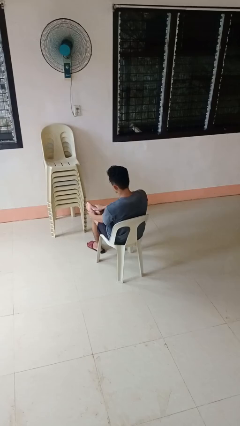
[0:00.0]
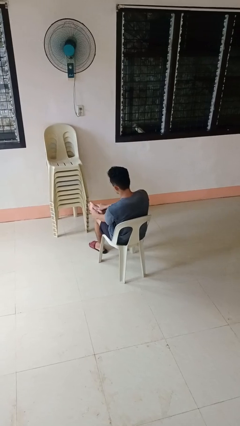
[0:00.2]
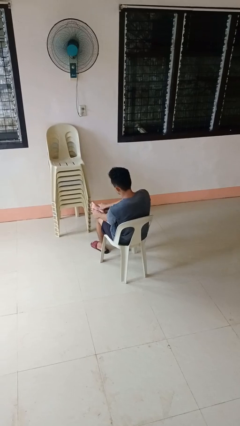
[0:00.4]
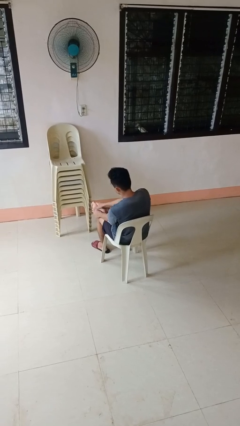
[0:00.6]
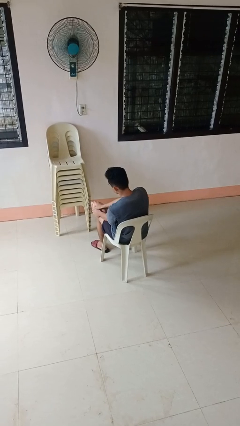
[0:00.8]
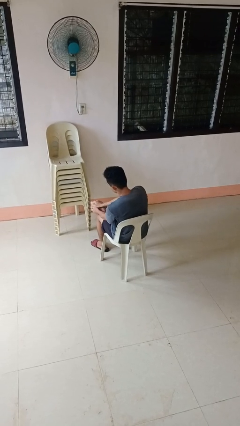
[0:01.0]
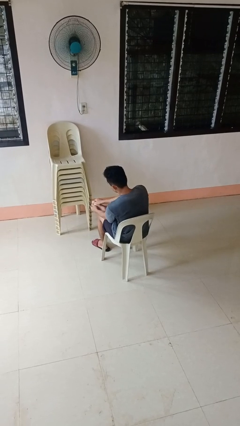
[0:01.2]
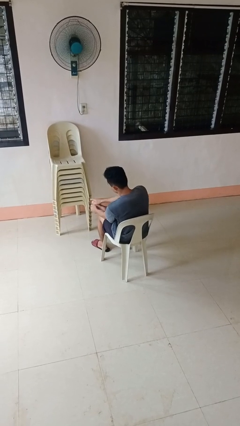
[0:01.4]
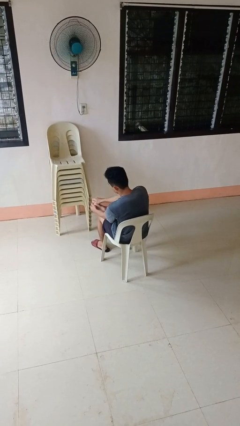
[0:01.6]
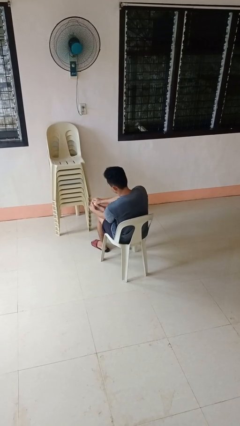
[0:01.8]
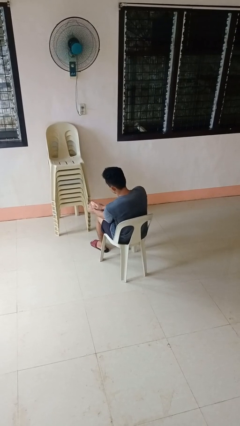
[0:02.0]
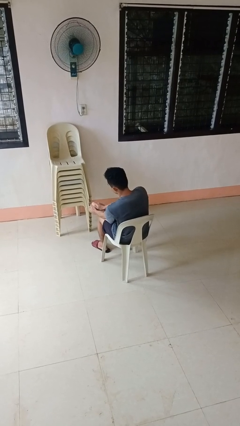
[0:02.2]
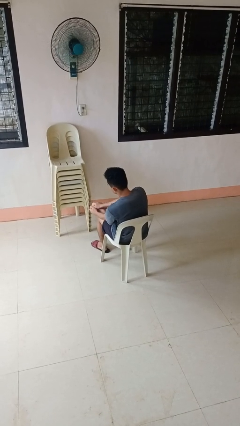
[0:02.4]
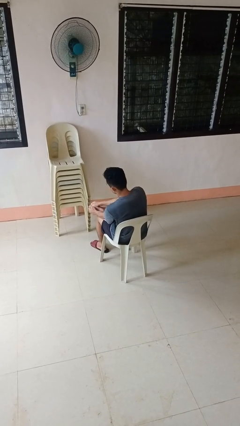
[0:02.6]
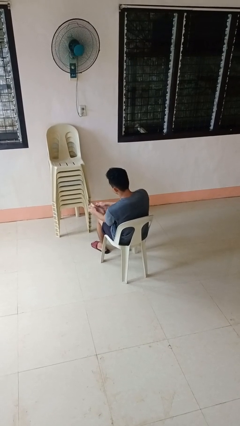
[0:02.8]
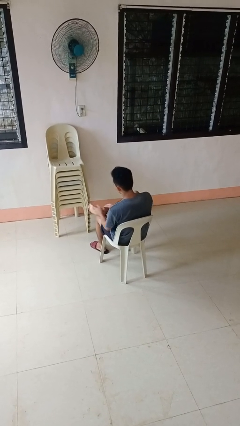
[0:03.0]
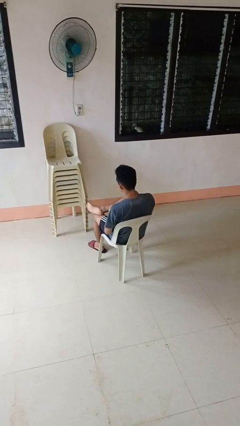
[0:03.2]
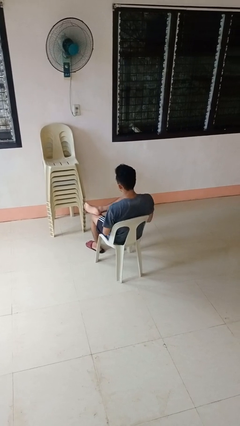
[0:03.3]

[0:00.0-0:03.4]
person rubs foot

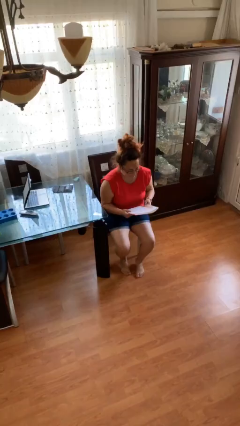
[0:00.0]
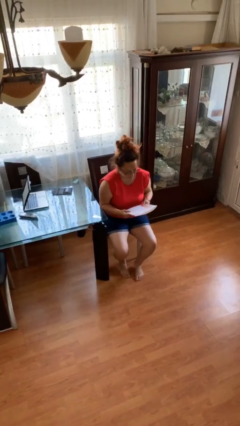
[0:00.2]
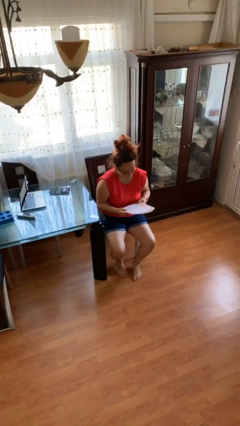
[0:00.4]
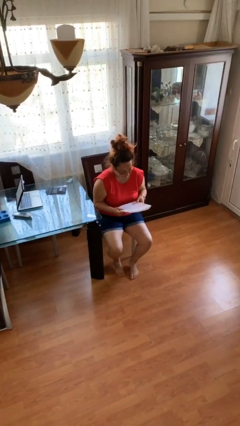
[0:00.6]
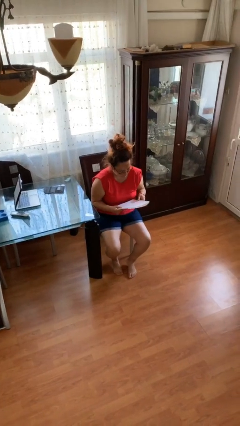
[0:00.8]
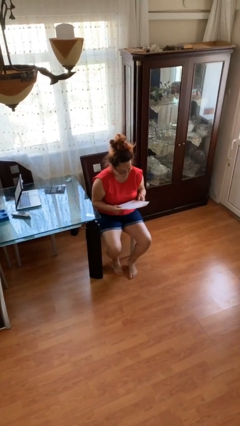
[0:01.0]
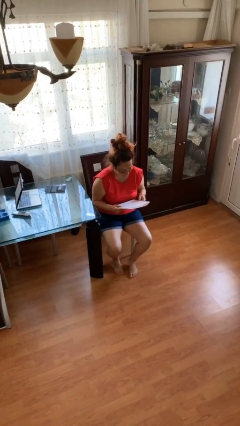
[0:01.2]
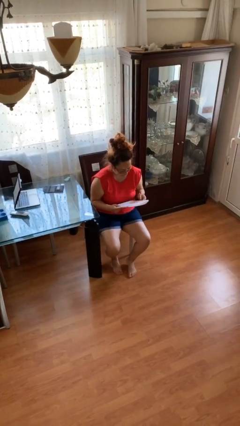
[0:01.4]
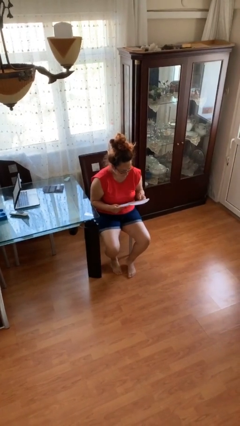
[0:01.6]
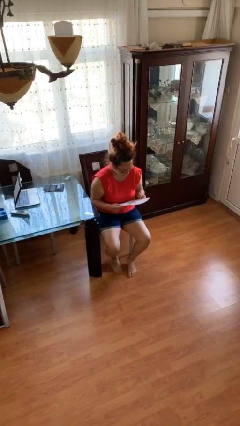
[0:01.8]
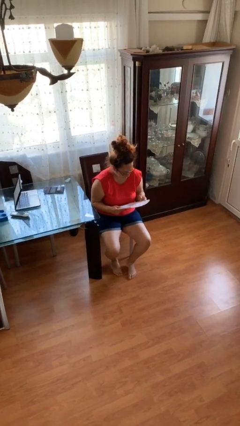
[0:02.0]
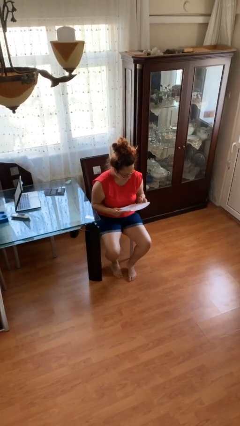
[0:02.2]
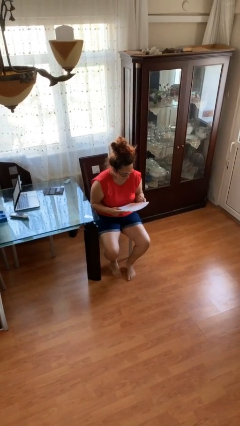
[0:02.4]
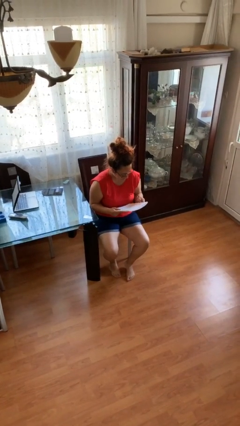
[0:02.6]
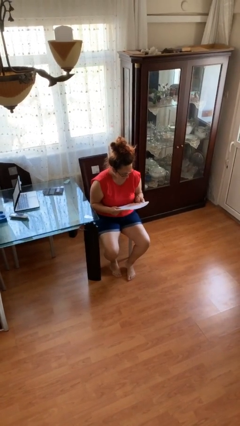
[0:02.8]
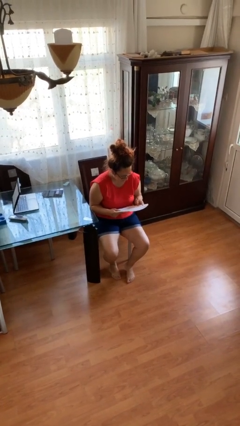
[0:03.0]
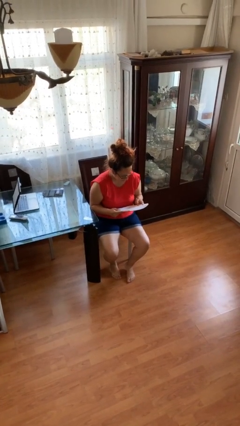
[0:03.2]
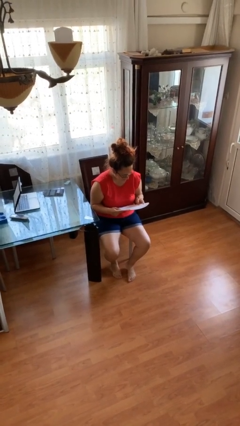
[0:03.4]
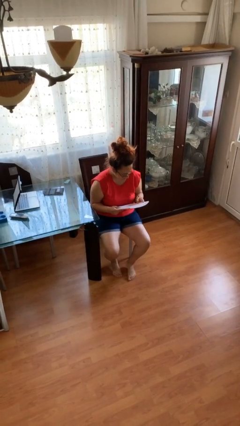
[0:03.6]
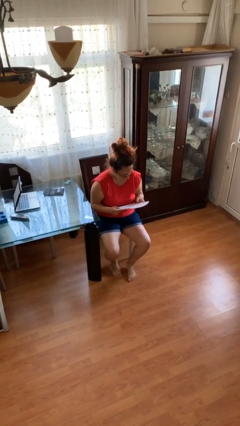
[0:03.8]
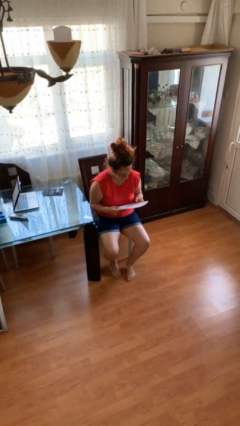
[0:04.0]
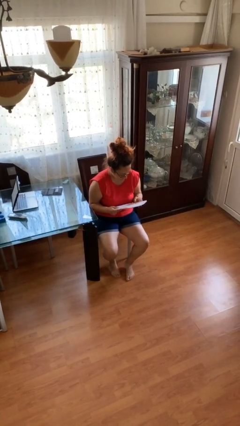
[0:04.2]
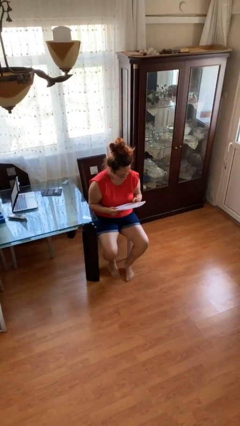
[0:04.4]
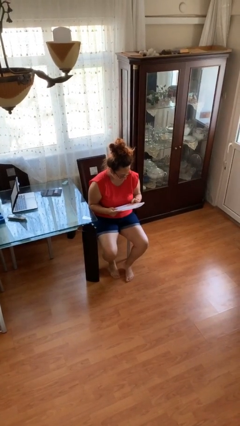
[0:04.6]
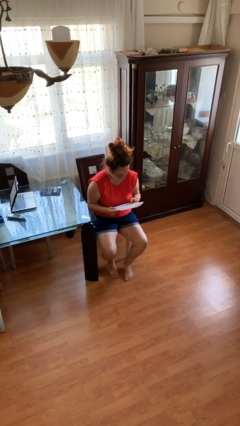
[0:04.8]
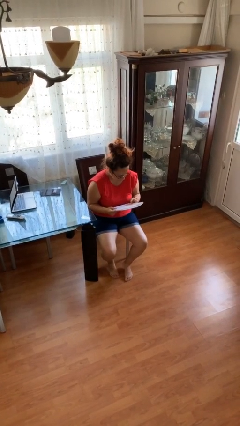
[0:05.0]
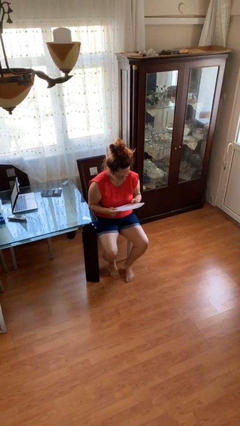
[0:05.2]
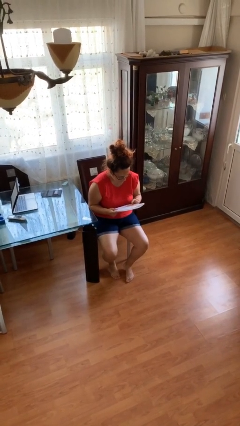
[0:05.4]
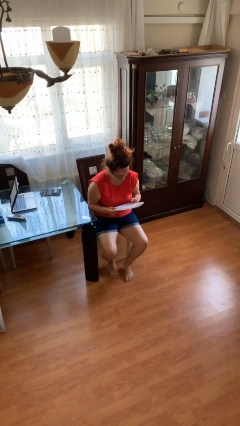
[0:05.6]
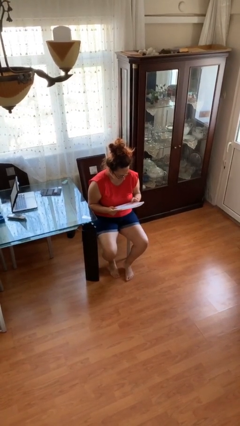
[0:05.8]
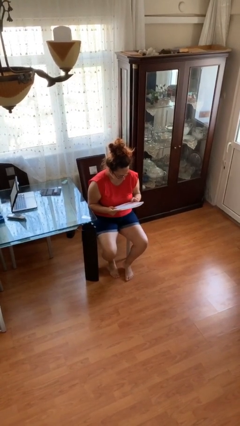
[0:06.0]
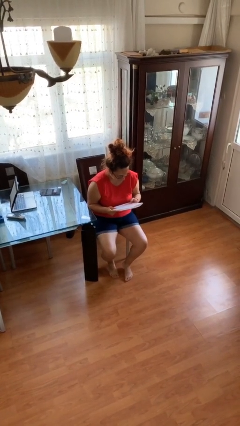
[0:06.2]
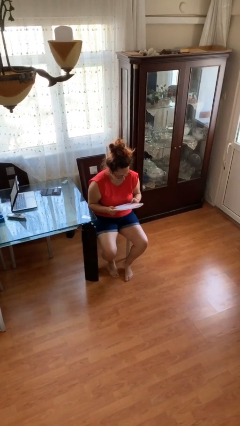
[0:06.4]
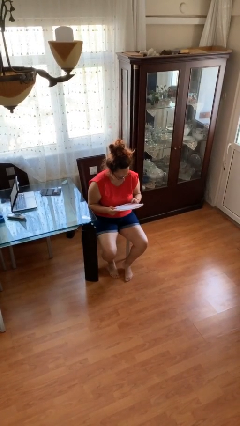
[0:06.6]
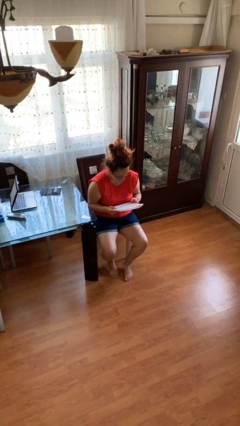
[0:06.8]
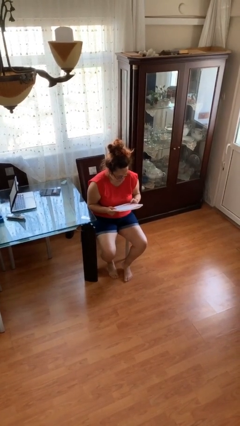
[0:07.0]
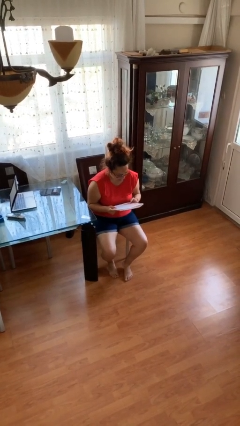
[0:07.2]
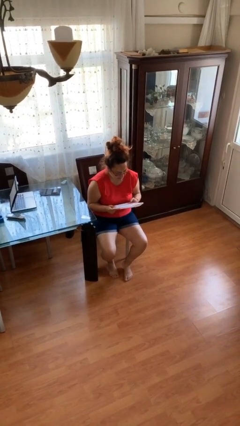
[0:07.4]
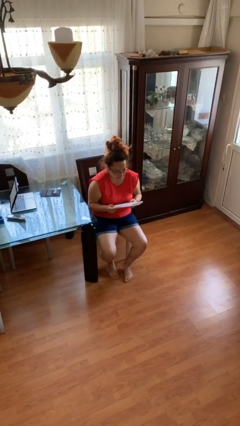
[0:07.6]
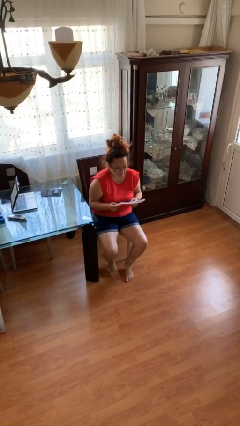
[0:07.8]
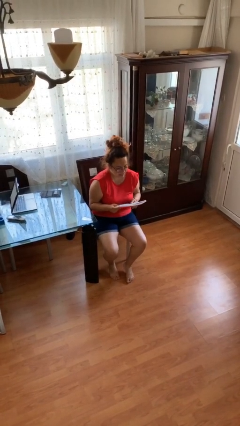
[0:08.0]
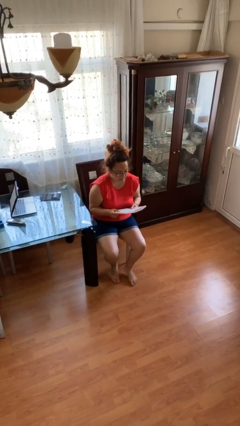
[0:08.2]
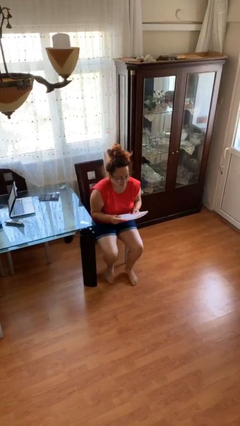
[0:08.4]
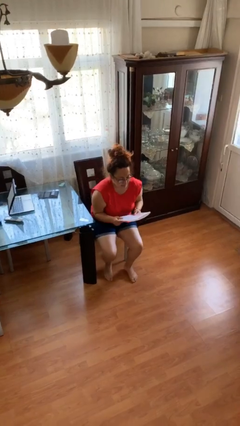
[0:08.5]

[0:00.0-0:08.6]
person reads document

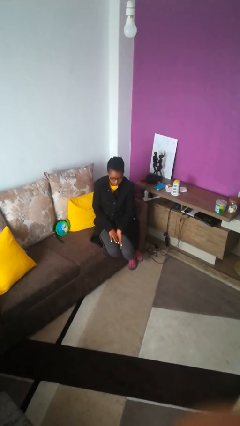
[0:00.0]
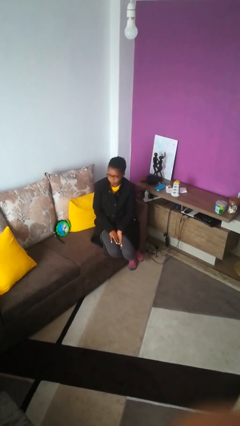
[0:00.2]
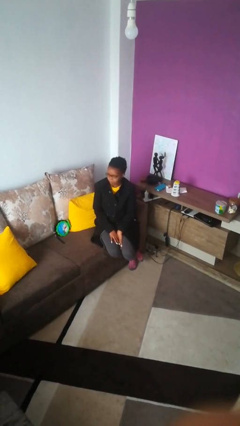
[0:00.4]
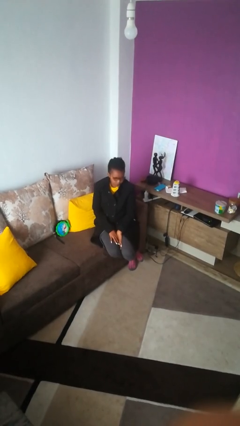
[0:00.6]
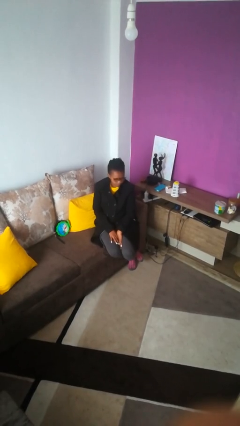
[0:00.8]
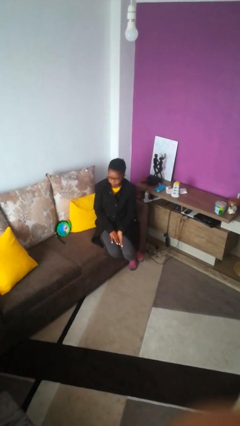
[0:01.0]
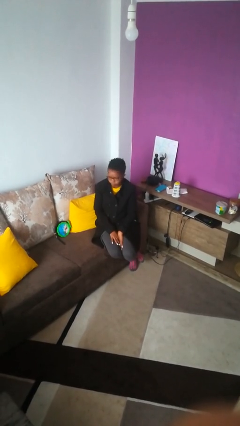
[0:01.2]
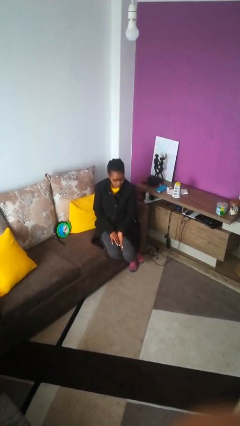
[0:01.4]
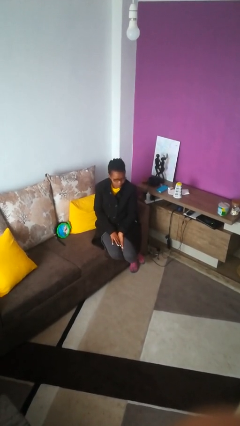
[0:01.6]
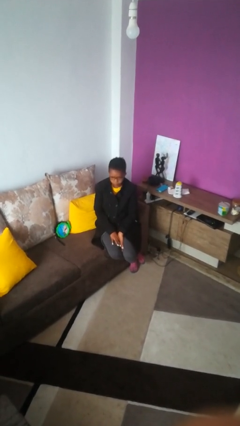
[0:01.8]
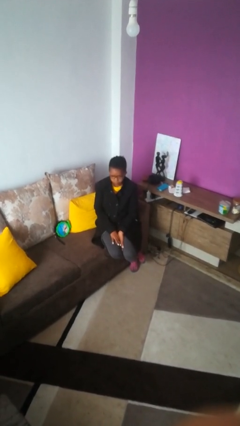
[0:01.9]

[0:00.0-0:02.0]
person shakes head

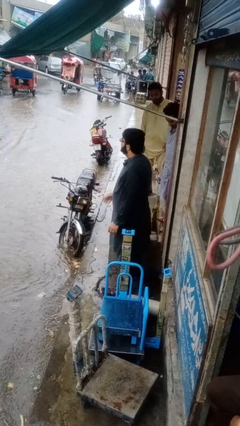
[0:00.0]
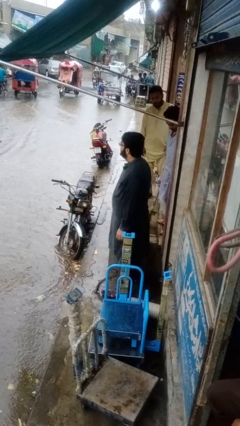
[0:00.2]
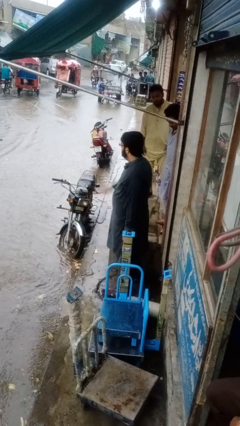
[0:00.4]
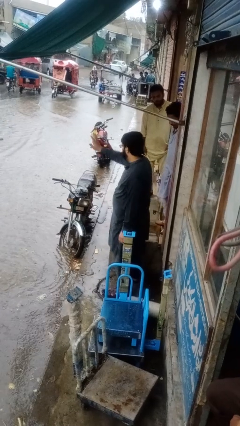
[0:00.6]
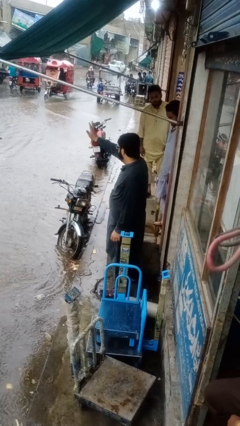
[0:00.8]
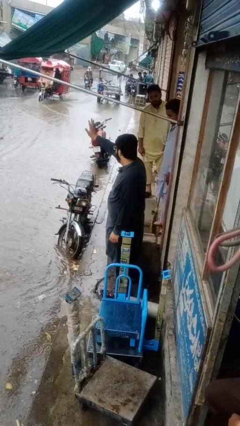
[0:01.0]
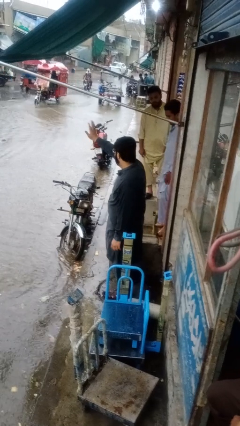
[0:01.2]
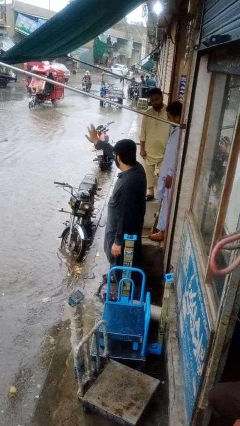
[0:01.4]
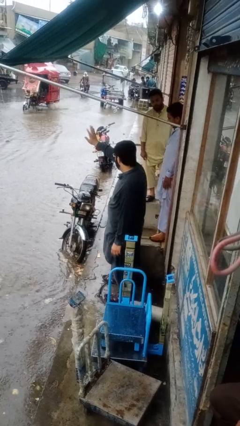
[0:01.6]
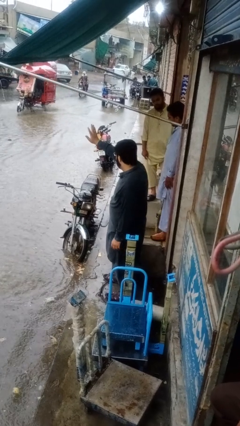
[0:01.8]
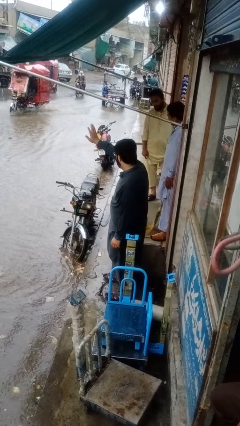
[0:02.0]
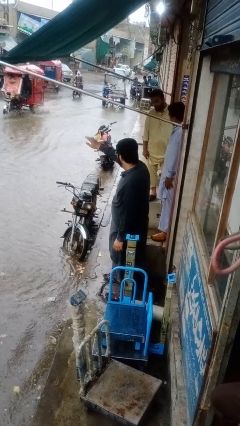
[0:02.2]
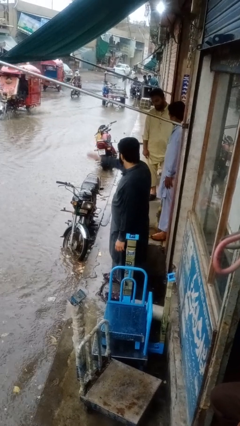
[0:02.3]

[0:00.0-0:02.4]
person waves at person

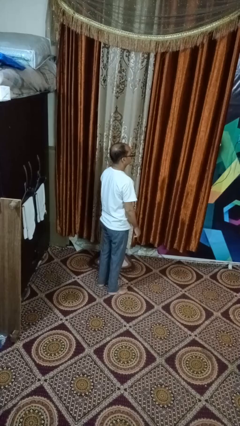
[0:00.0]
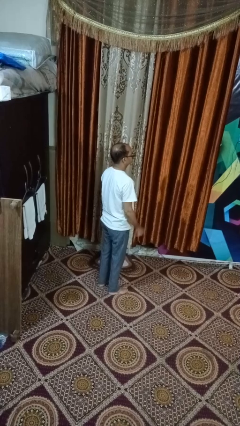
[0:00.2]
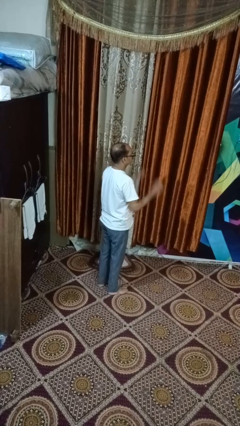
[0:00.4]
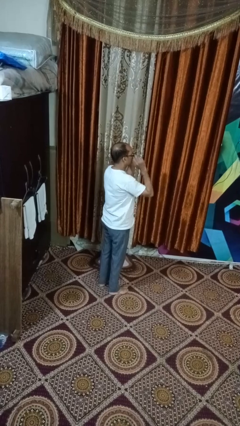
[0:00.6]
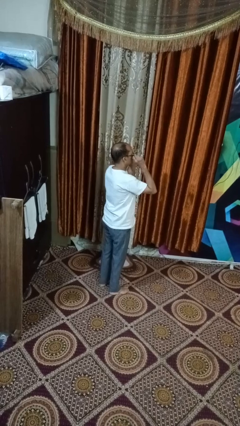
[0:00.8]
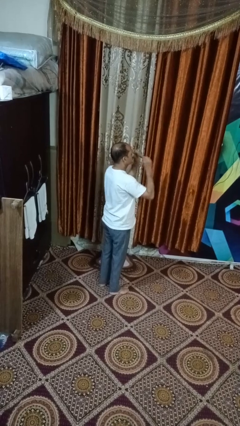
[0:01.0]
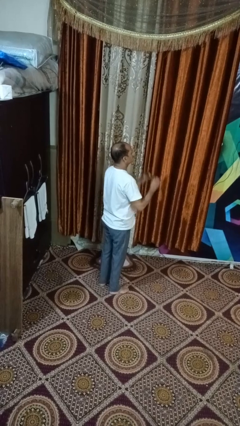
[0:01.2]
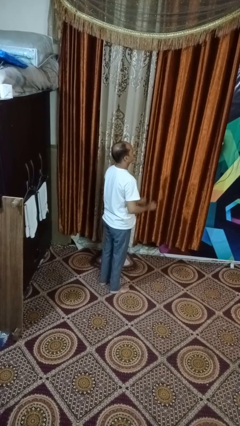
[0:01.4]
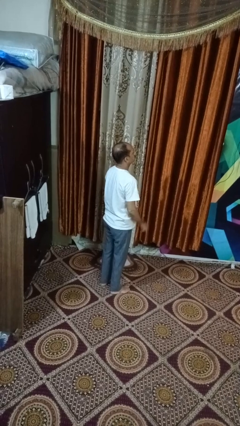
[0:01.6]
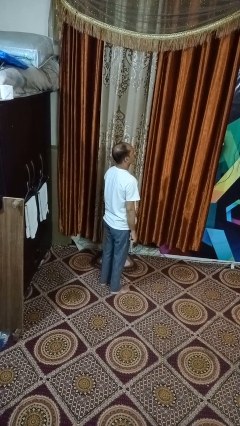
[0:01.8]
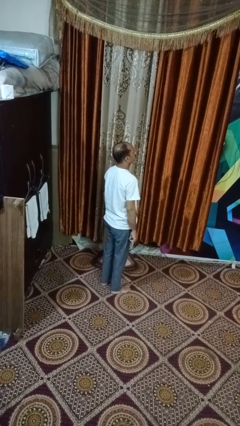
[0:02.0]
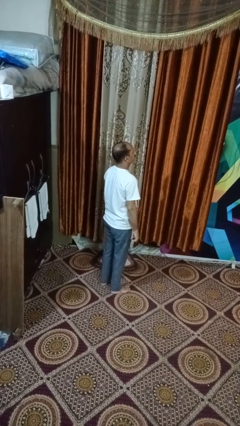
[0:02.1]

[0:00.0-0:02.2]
person takes off glasses
